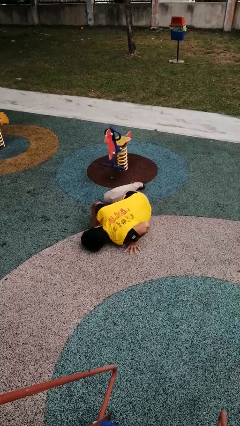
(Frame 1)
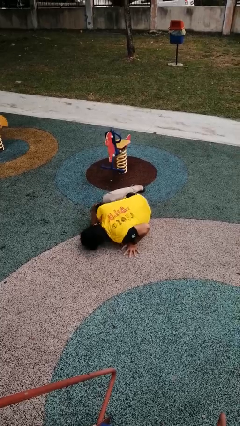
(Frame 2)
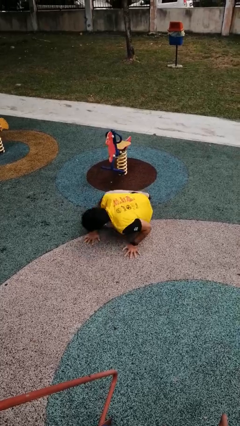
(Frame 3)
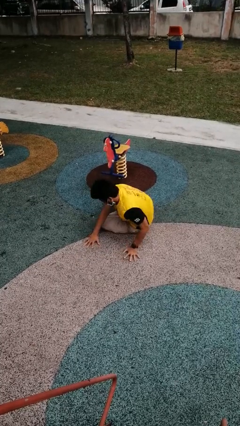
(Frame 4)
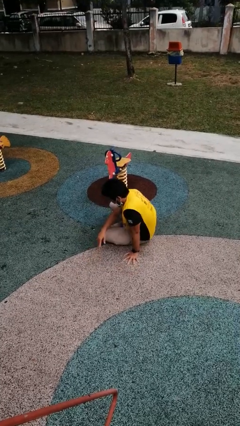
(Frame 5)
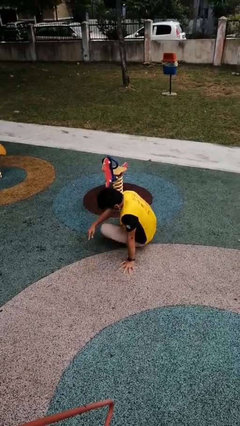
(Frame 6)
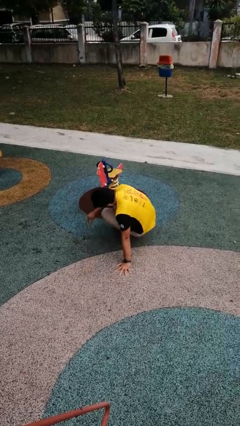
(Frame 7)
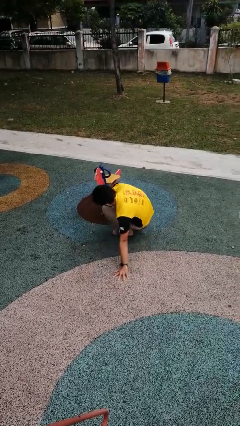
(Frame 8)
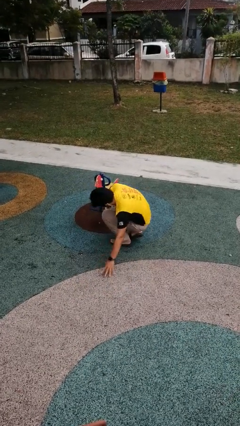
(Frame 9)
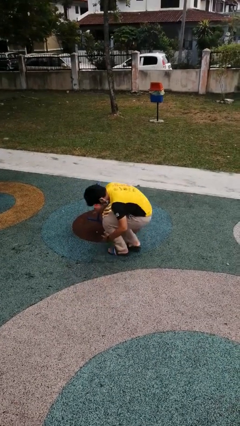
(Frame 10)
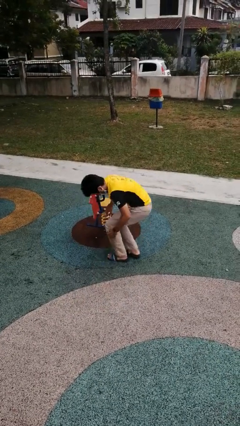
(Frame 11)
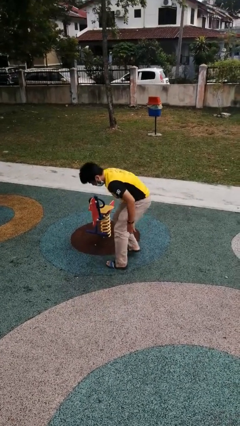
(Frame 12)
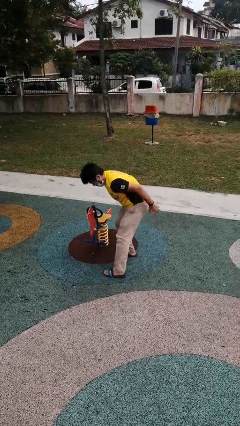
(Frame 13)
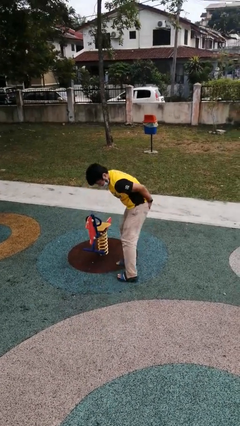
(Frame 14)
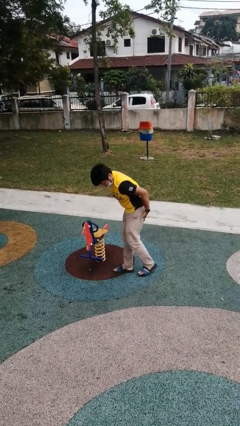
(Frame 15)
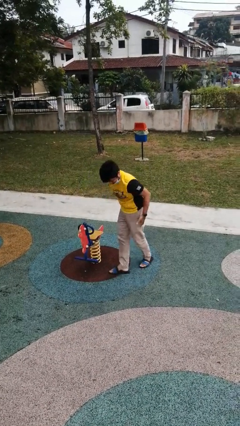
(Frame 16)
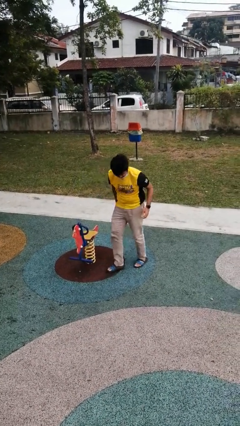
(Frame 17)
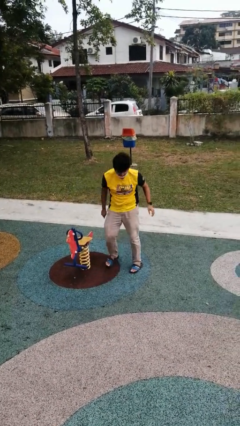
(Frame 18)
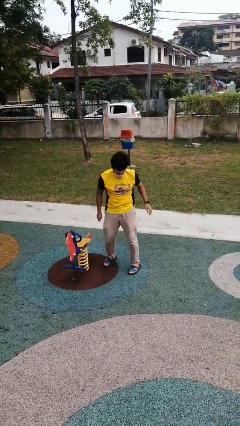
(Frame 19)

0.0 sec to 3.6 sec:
person stands up from floor

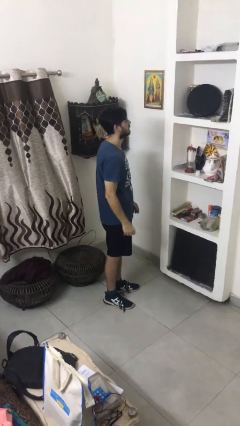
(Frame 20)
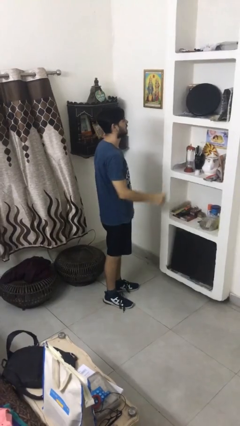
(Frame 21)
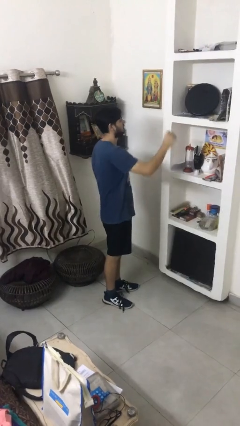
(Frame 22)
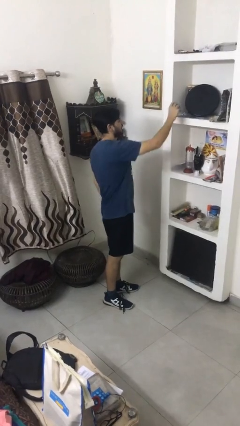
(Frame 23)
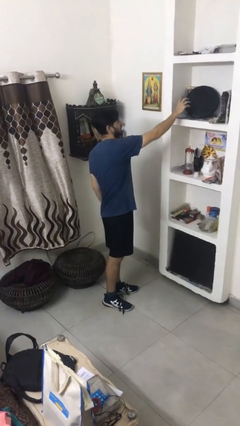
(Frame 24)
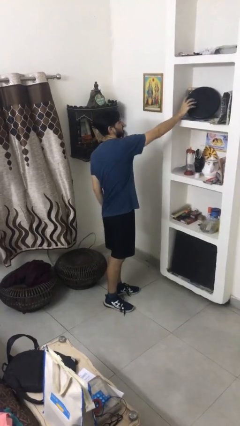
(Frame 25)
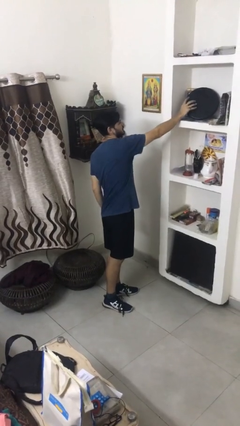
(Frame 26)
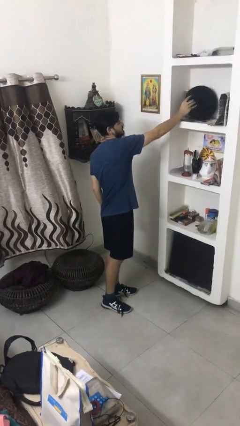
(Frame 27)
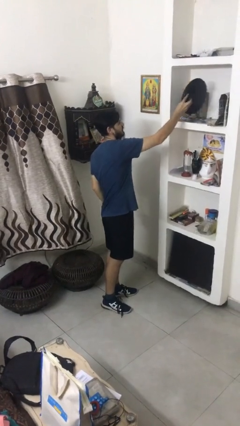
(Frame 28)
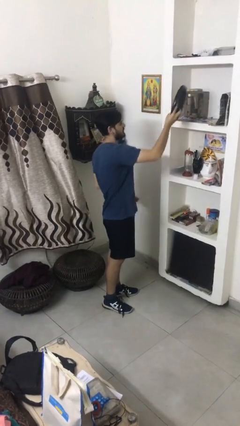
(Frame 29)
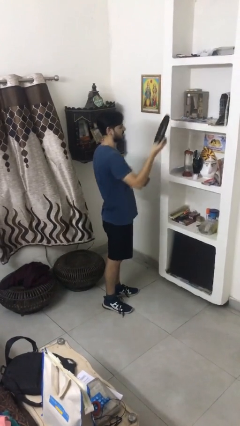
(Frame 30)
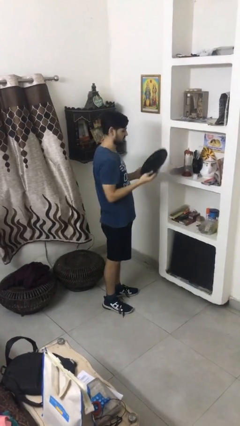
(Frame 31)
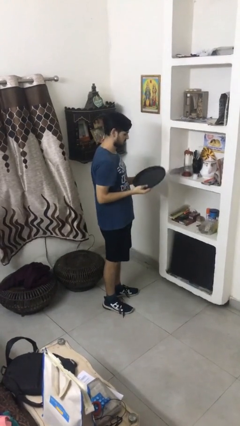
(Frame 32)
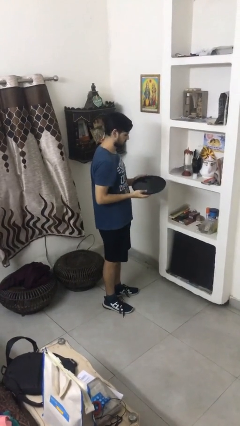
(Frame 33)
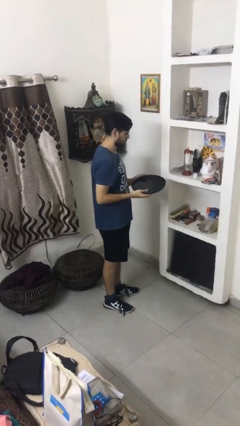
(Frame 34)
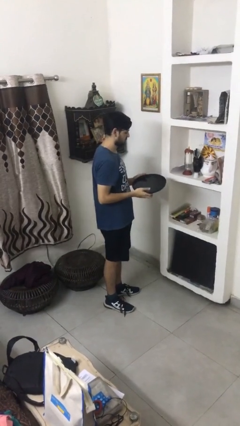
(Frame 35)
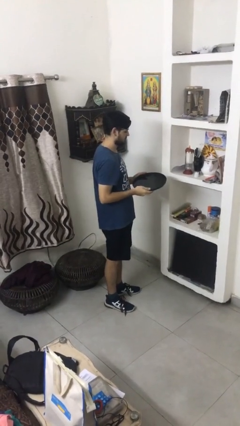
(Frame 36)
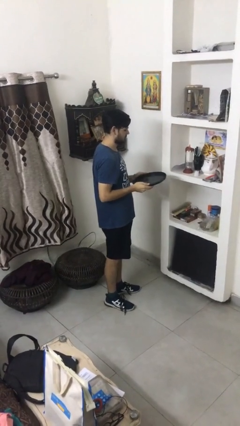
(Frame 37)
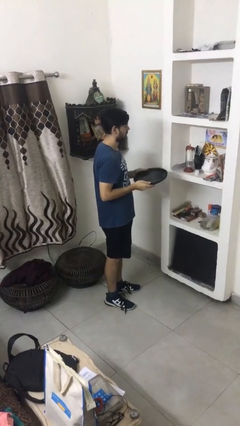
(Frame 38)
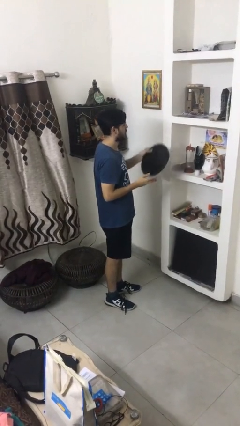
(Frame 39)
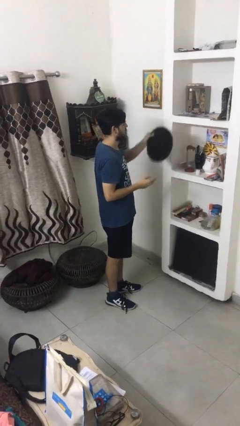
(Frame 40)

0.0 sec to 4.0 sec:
person picks up object from shelf

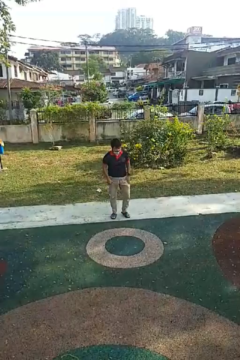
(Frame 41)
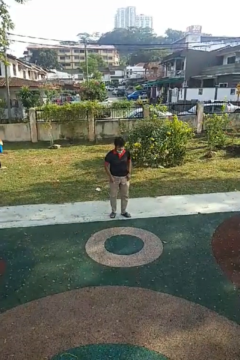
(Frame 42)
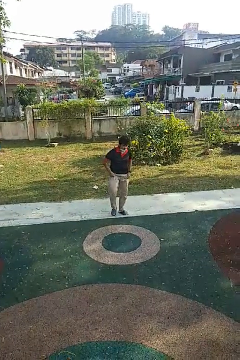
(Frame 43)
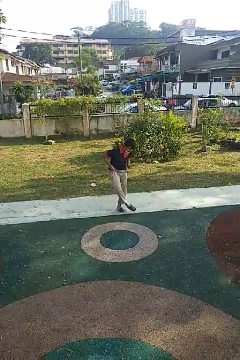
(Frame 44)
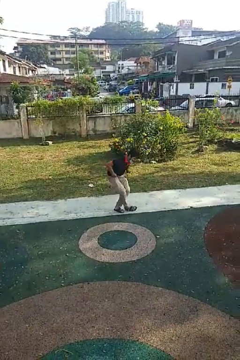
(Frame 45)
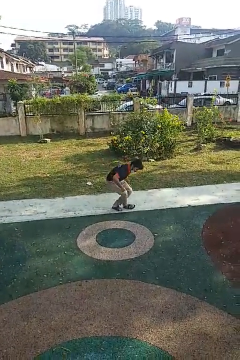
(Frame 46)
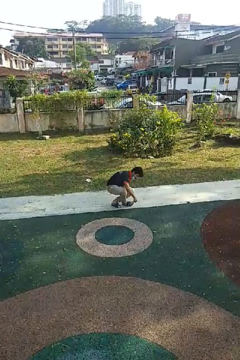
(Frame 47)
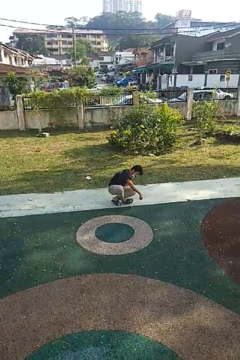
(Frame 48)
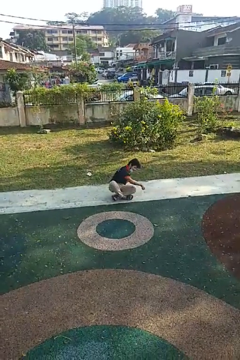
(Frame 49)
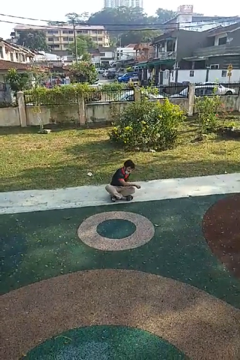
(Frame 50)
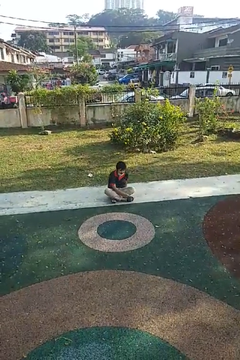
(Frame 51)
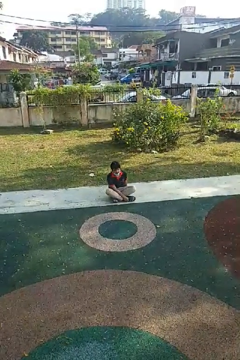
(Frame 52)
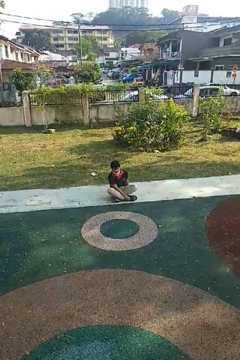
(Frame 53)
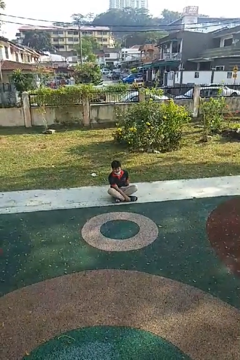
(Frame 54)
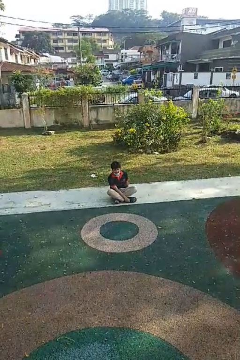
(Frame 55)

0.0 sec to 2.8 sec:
person sits crisscross

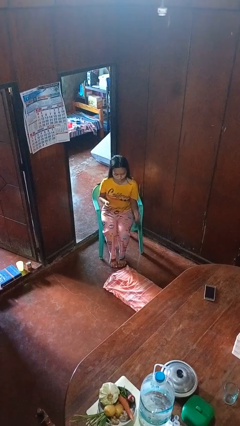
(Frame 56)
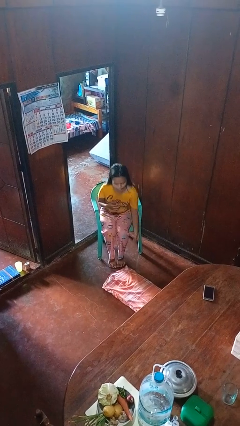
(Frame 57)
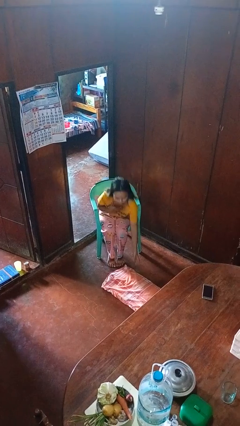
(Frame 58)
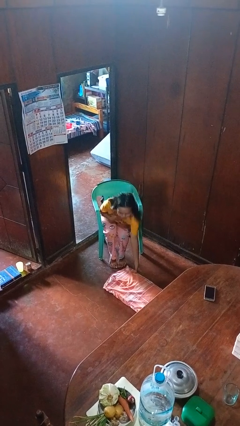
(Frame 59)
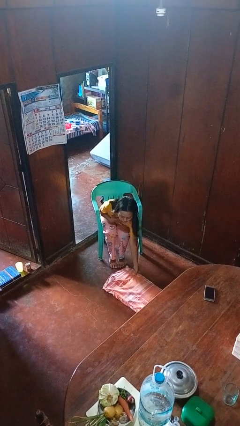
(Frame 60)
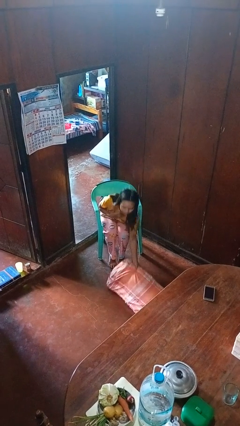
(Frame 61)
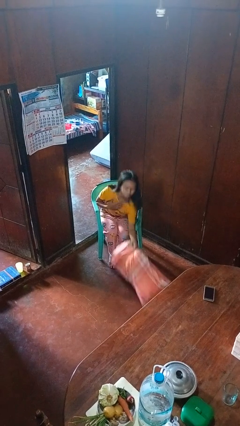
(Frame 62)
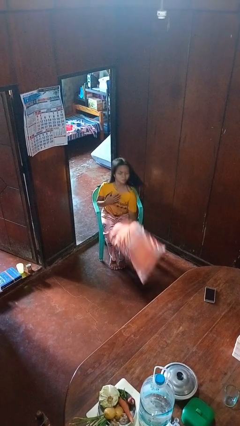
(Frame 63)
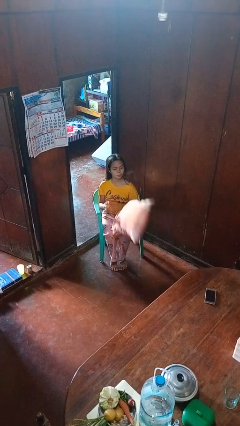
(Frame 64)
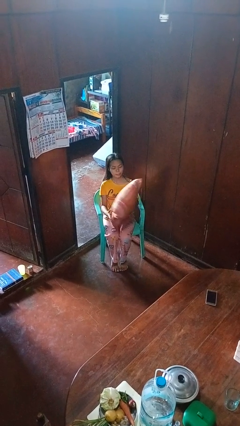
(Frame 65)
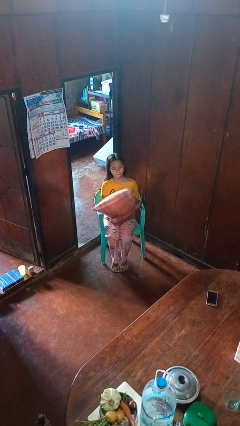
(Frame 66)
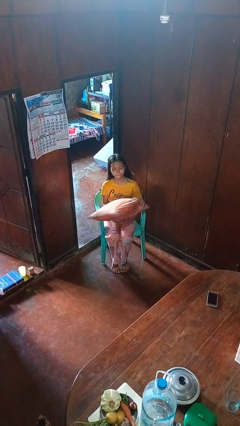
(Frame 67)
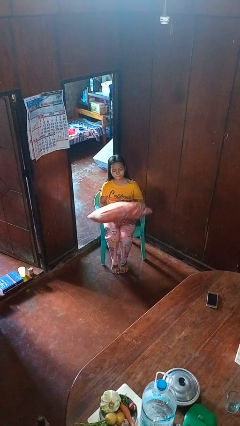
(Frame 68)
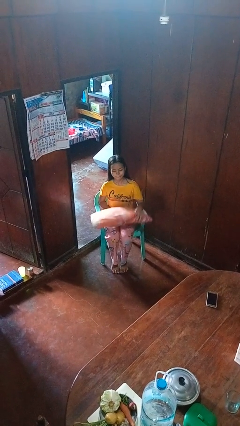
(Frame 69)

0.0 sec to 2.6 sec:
person picks up object from floor

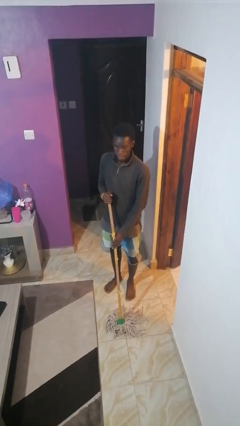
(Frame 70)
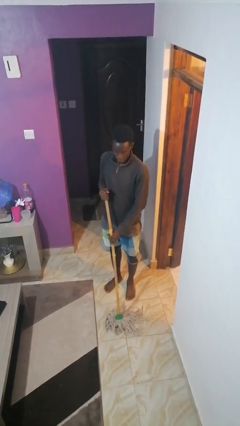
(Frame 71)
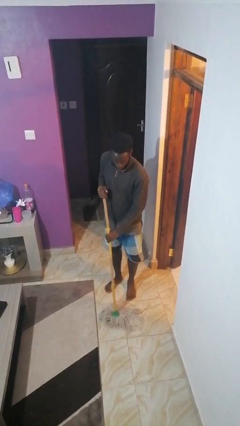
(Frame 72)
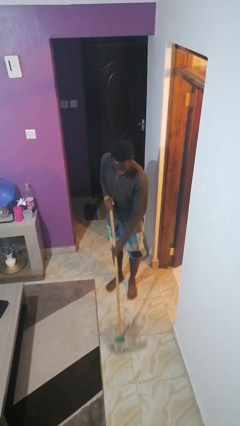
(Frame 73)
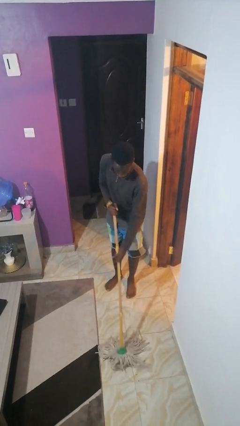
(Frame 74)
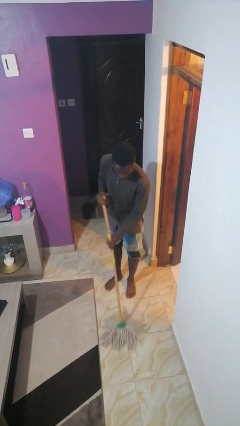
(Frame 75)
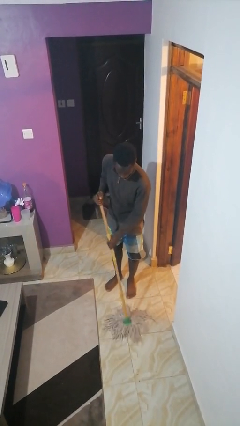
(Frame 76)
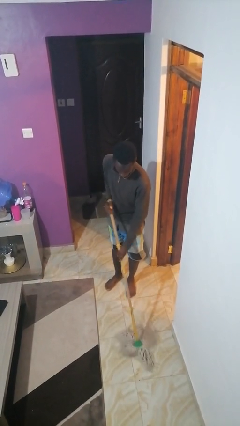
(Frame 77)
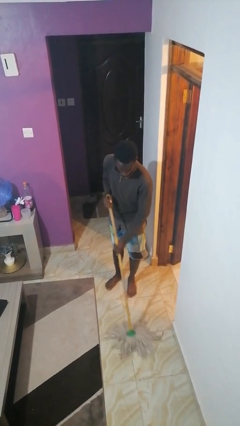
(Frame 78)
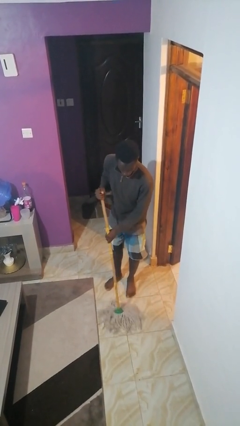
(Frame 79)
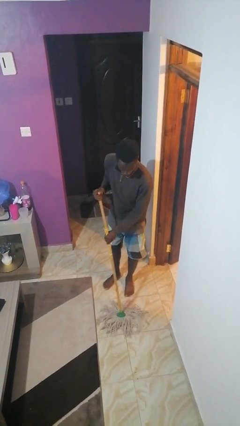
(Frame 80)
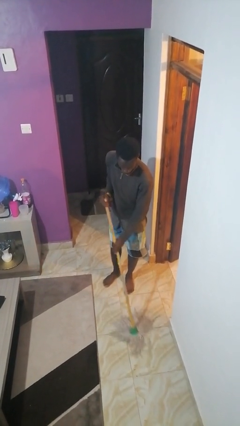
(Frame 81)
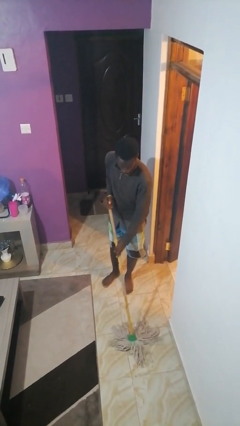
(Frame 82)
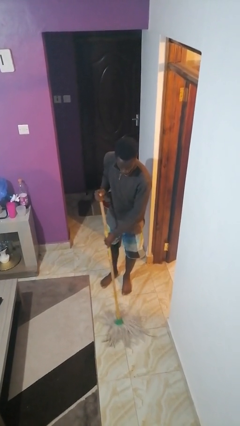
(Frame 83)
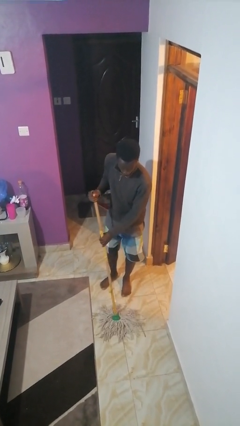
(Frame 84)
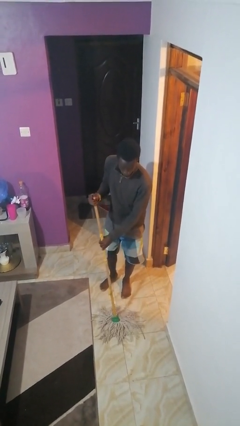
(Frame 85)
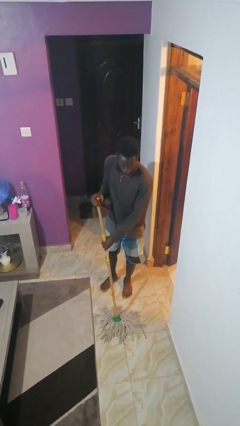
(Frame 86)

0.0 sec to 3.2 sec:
person mops

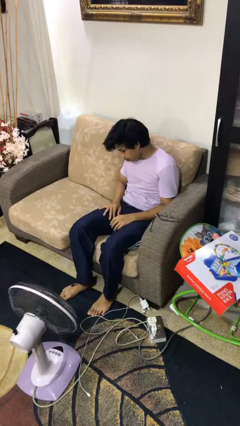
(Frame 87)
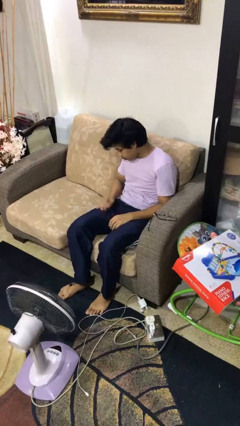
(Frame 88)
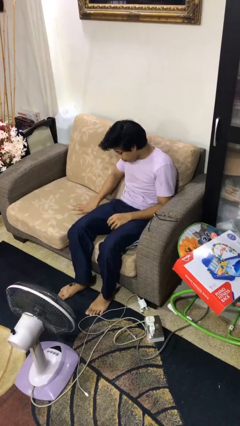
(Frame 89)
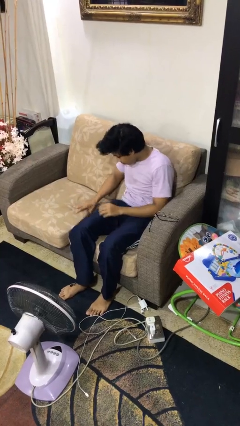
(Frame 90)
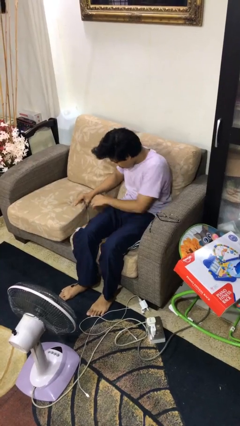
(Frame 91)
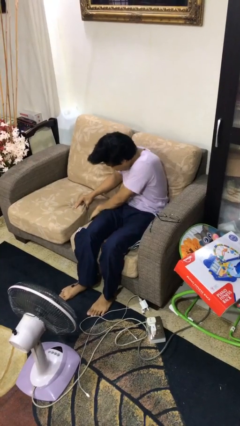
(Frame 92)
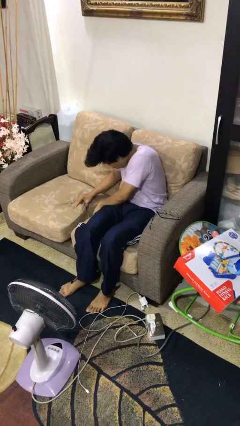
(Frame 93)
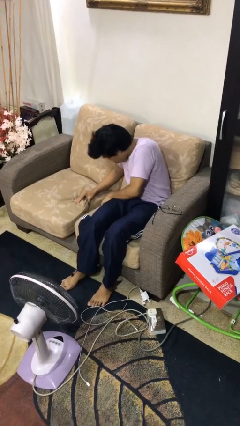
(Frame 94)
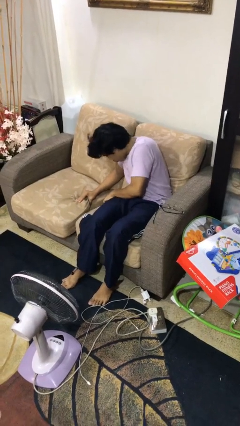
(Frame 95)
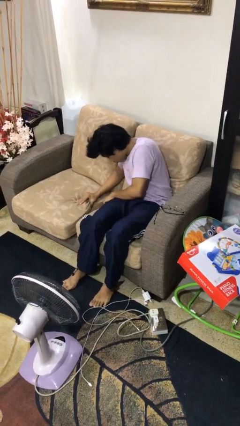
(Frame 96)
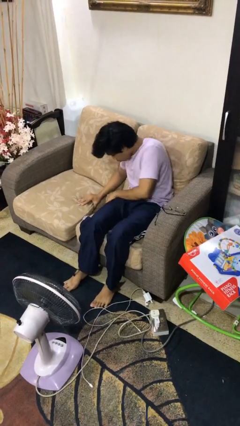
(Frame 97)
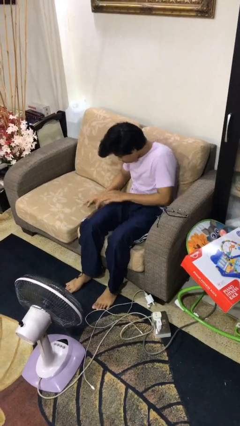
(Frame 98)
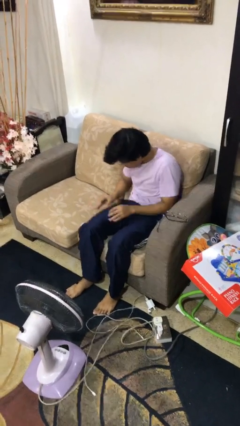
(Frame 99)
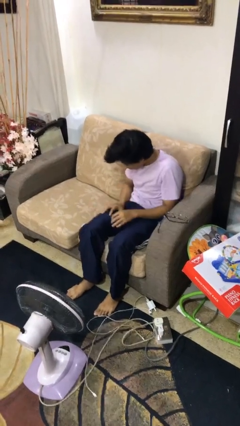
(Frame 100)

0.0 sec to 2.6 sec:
person searches in couch
